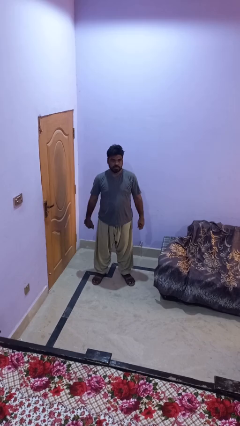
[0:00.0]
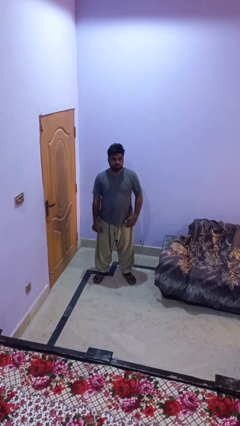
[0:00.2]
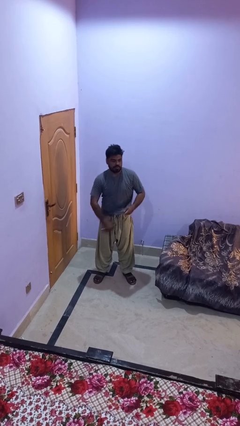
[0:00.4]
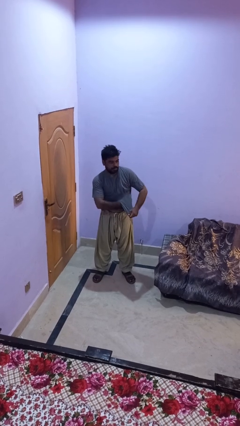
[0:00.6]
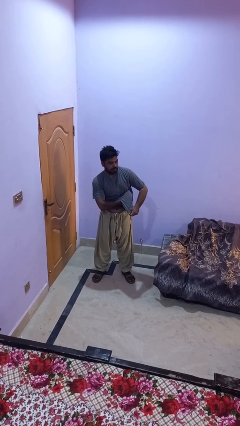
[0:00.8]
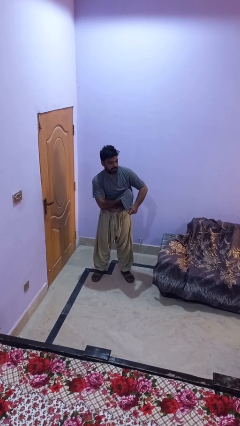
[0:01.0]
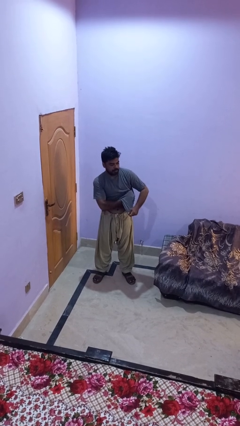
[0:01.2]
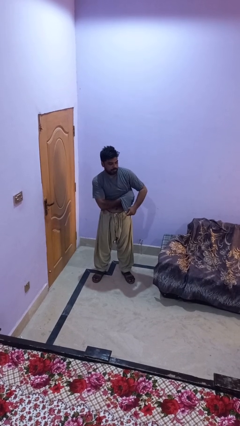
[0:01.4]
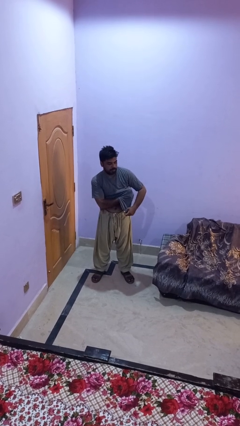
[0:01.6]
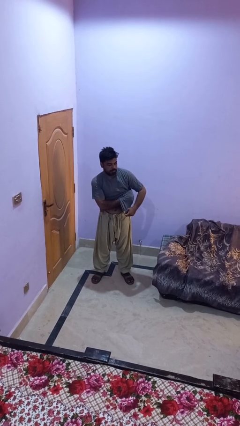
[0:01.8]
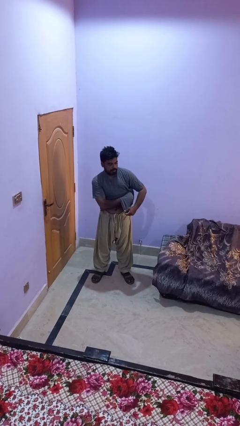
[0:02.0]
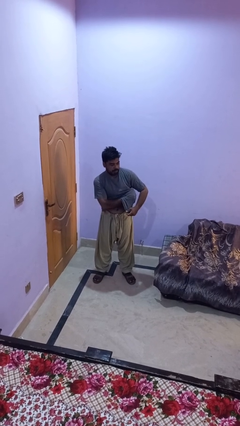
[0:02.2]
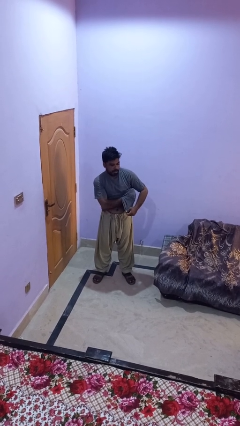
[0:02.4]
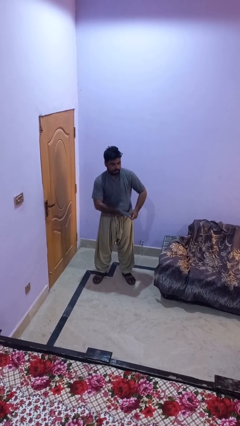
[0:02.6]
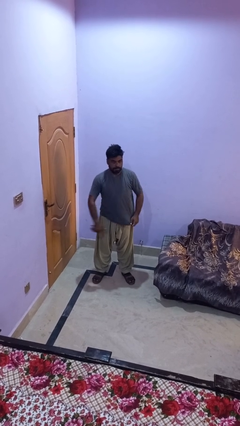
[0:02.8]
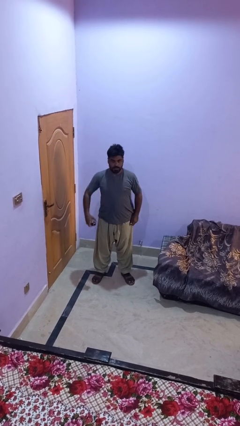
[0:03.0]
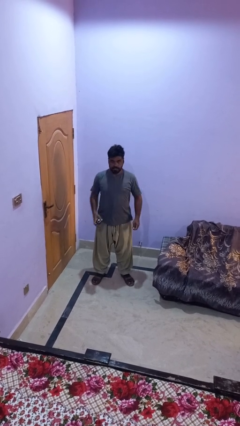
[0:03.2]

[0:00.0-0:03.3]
person applies deodorant

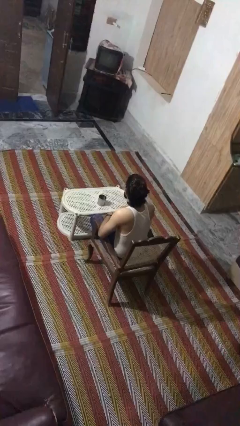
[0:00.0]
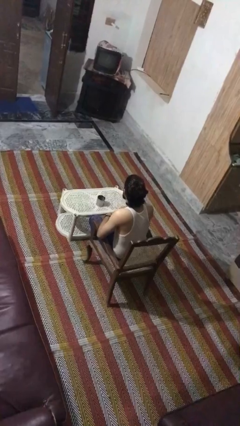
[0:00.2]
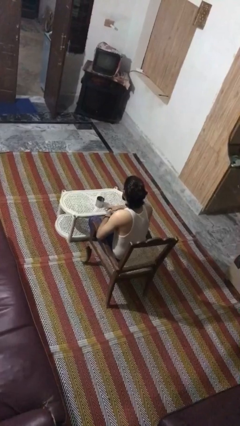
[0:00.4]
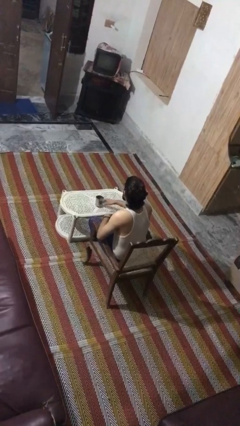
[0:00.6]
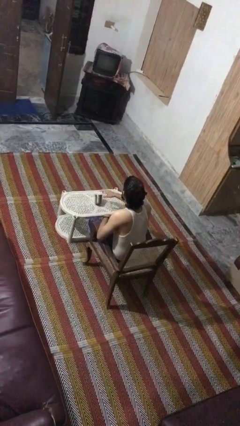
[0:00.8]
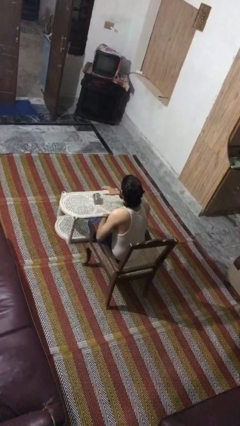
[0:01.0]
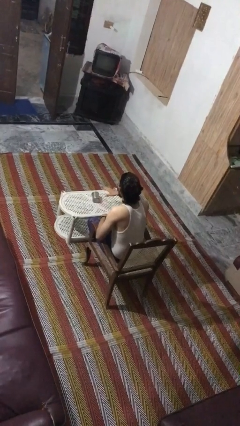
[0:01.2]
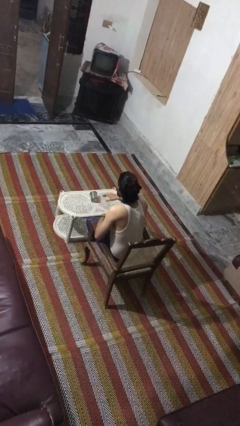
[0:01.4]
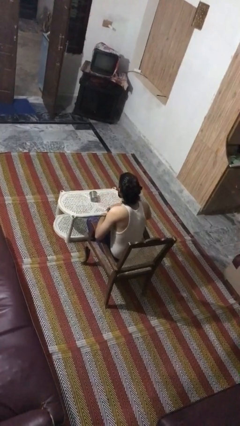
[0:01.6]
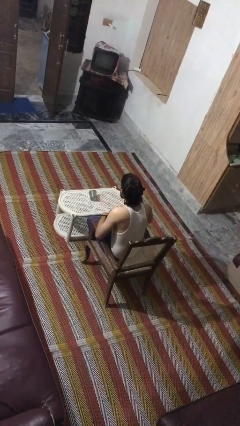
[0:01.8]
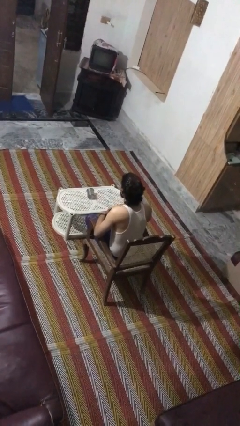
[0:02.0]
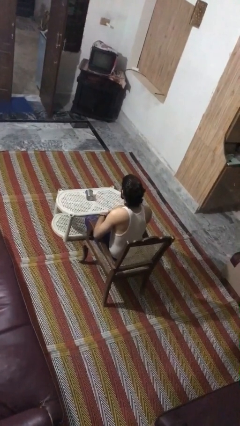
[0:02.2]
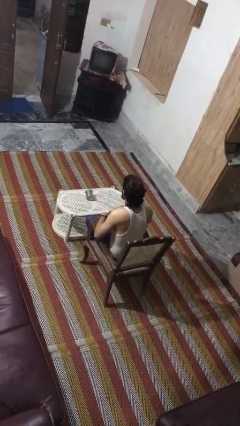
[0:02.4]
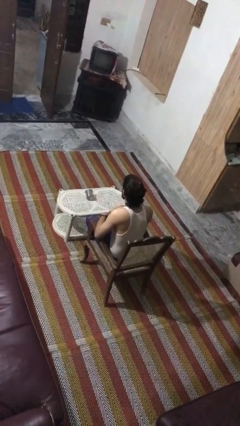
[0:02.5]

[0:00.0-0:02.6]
person knocks over glass

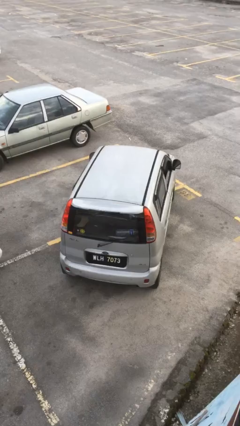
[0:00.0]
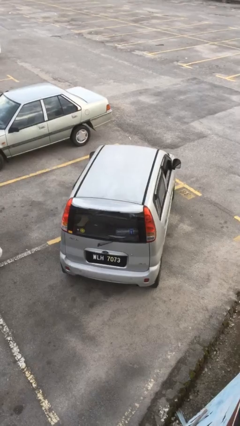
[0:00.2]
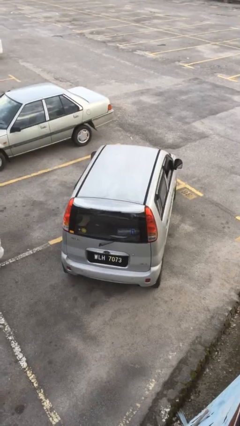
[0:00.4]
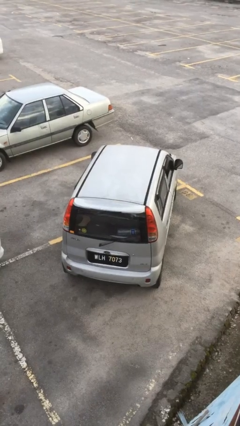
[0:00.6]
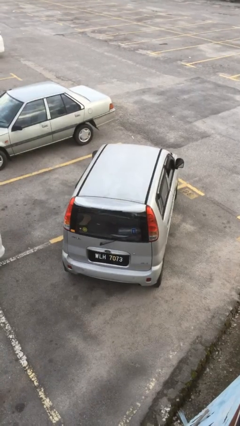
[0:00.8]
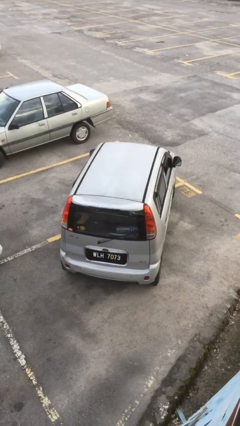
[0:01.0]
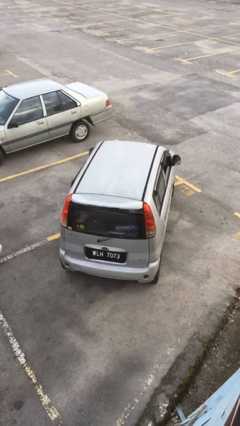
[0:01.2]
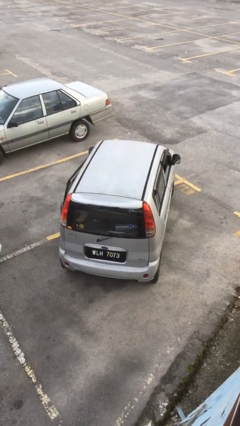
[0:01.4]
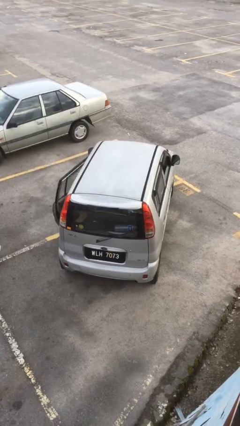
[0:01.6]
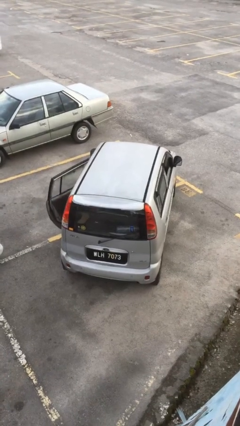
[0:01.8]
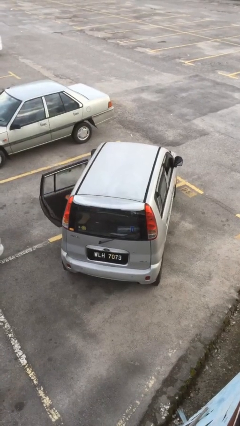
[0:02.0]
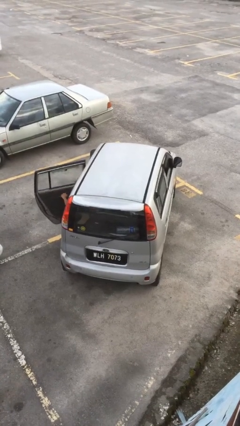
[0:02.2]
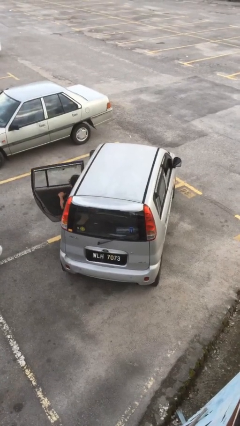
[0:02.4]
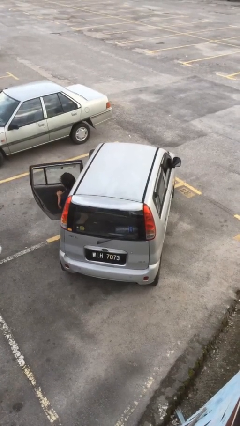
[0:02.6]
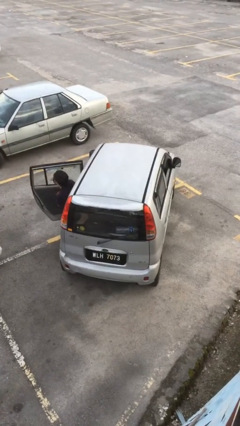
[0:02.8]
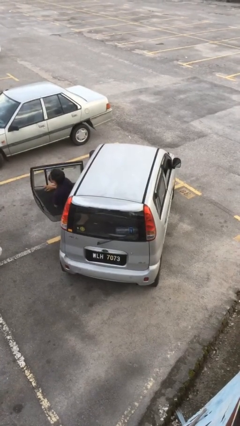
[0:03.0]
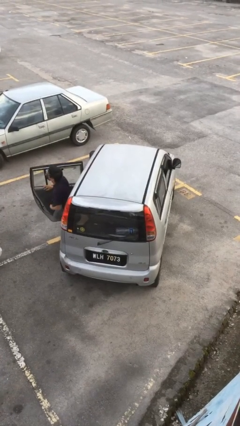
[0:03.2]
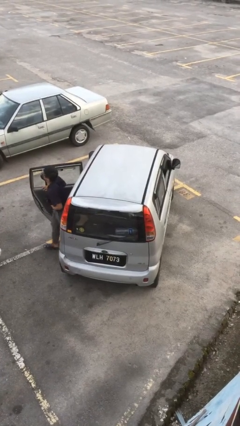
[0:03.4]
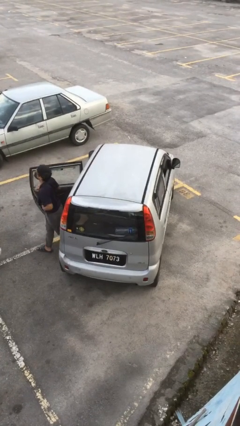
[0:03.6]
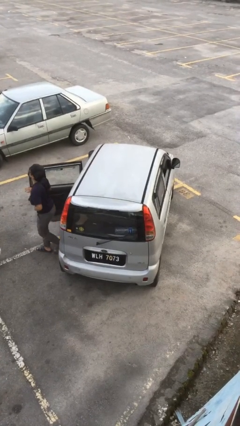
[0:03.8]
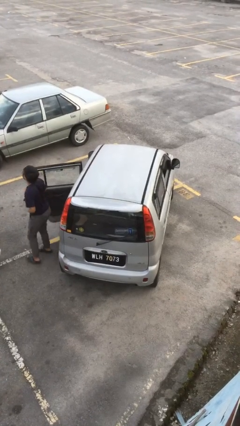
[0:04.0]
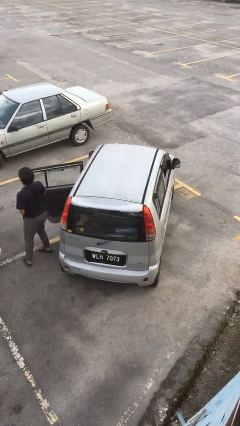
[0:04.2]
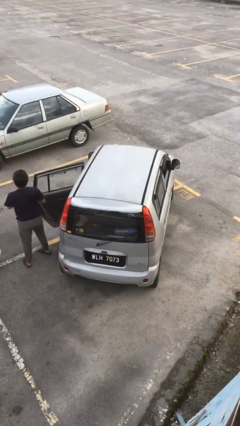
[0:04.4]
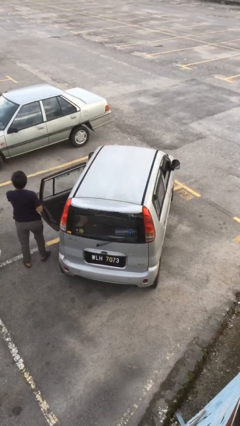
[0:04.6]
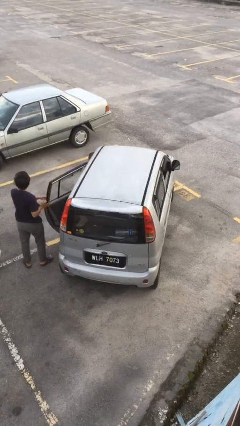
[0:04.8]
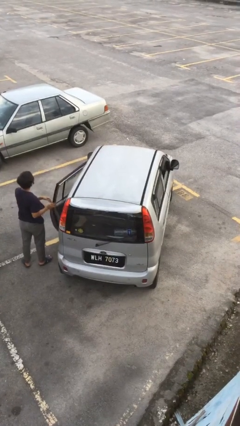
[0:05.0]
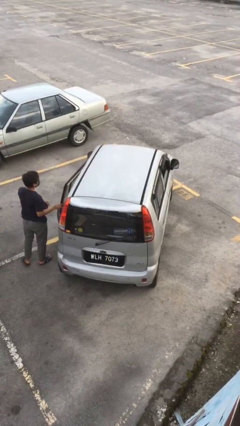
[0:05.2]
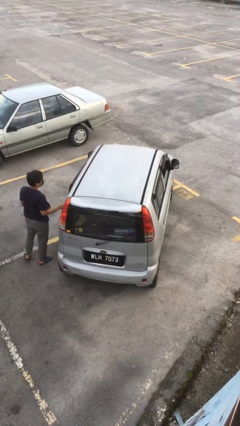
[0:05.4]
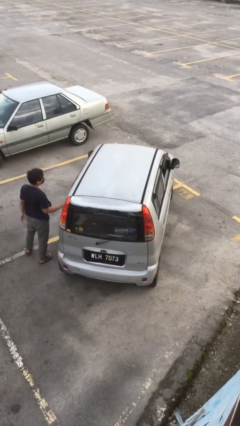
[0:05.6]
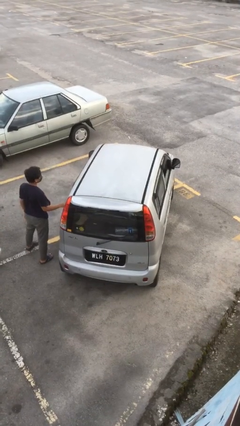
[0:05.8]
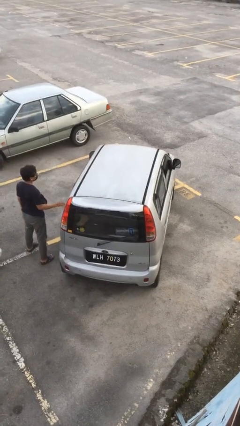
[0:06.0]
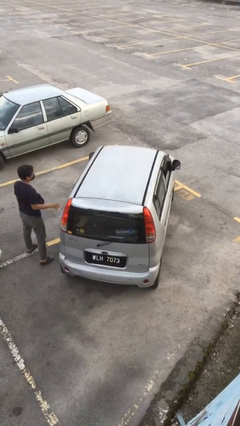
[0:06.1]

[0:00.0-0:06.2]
car drops off person

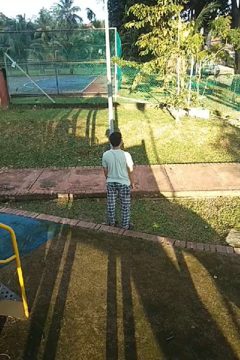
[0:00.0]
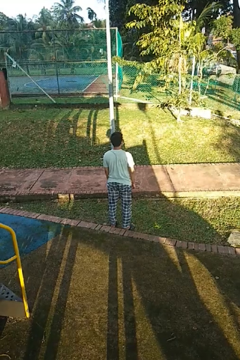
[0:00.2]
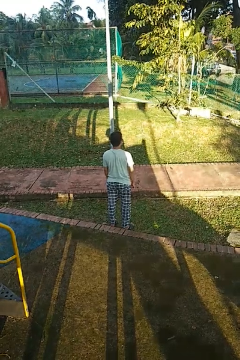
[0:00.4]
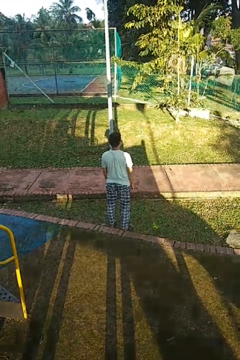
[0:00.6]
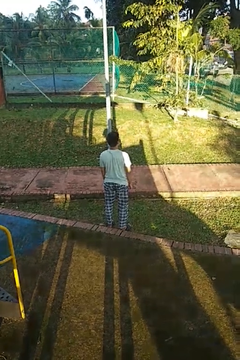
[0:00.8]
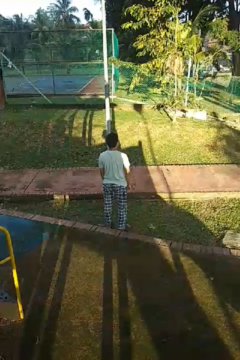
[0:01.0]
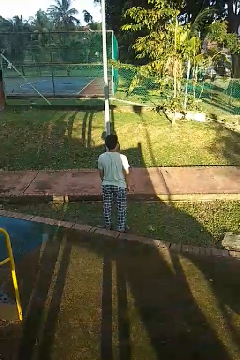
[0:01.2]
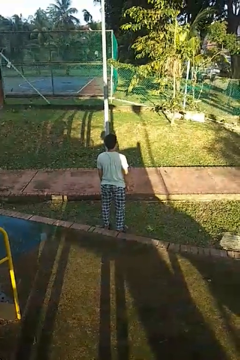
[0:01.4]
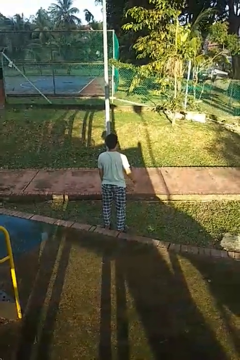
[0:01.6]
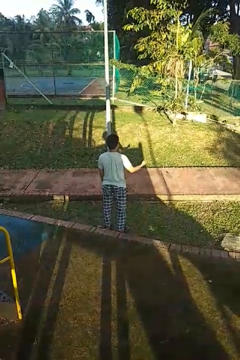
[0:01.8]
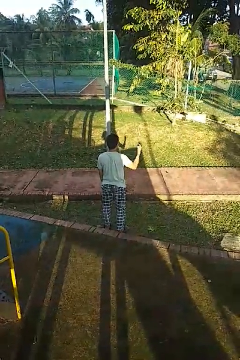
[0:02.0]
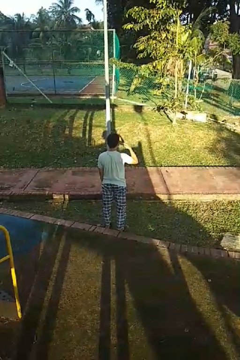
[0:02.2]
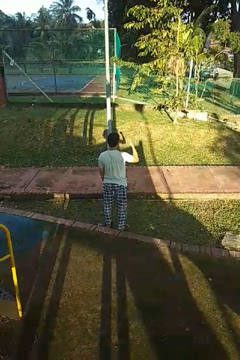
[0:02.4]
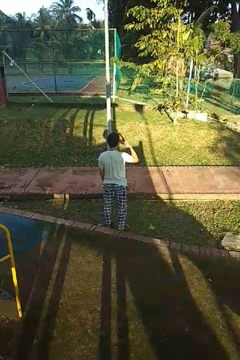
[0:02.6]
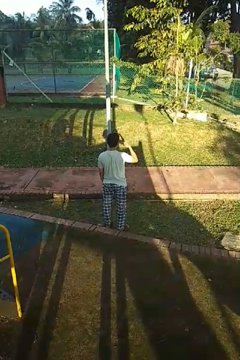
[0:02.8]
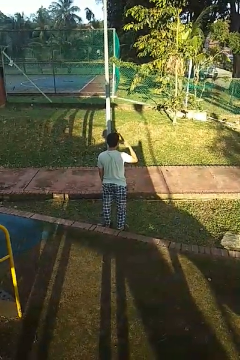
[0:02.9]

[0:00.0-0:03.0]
person gestures listen closely

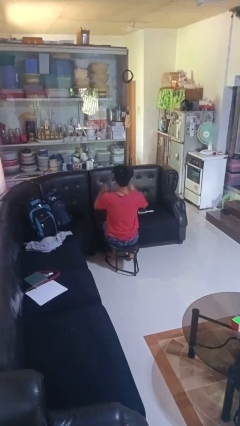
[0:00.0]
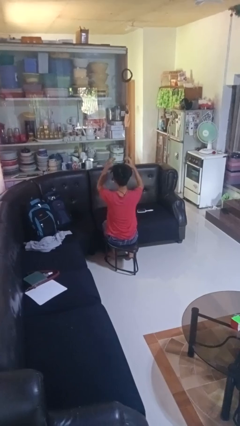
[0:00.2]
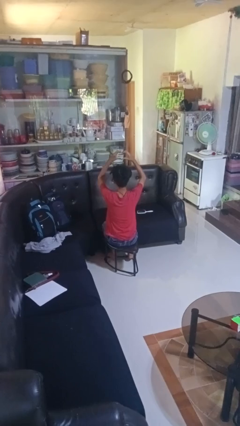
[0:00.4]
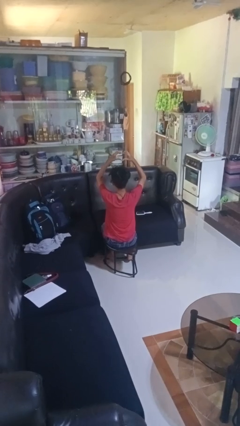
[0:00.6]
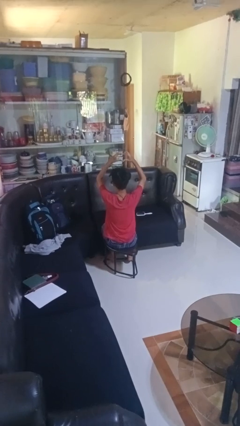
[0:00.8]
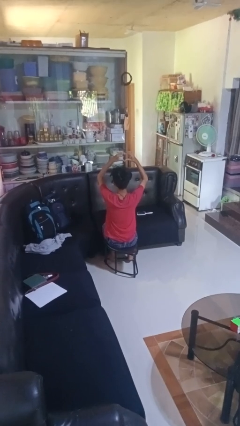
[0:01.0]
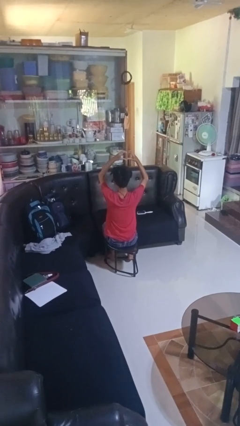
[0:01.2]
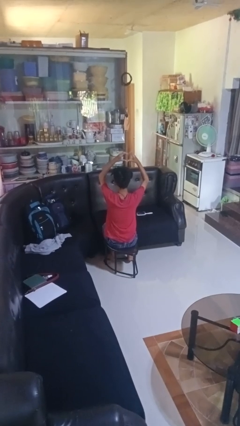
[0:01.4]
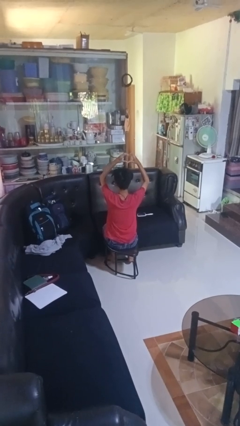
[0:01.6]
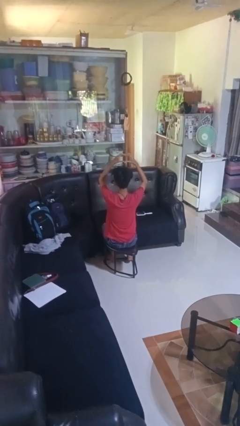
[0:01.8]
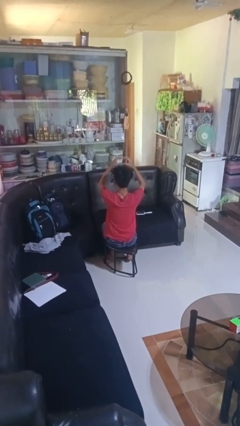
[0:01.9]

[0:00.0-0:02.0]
person gestures heart

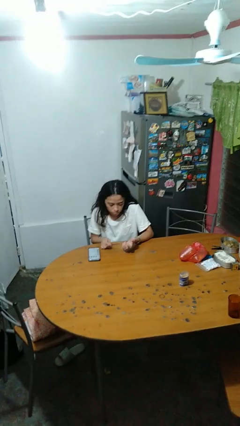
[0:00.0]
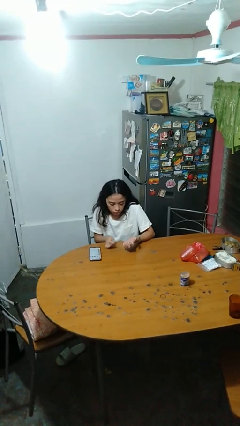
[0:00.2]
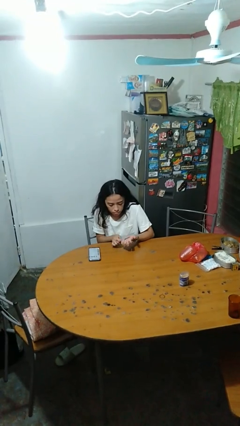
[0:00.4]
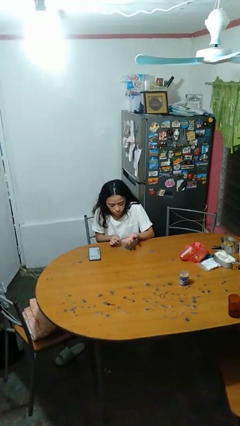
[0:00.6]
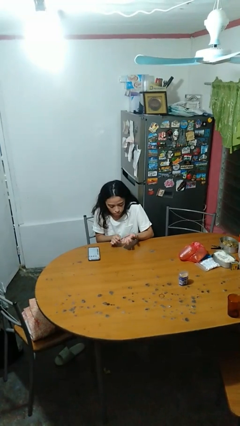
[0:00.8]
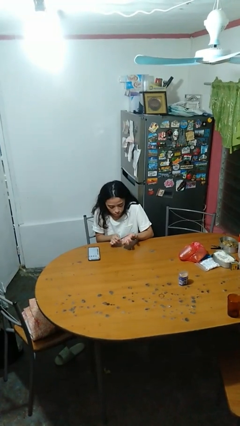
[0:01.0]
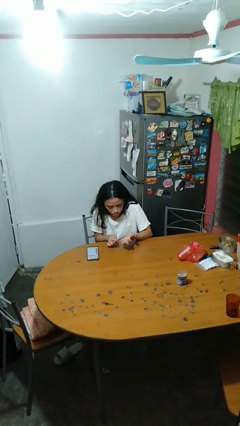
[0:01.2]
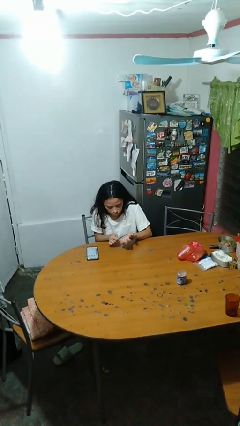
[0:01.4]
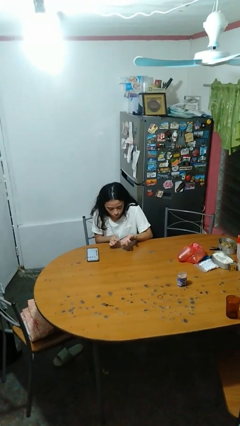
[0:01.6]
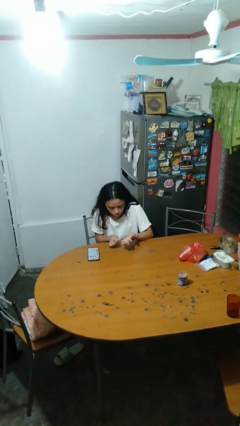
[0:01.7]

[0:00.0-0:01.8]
person files fingernails
